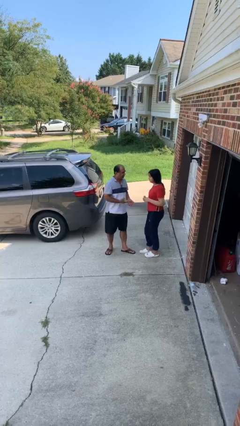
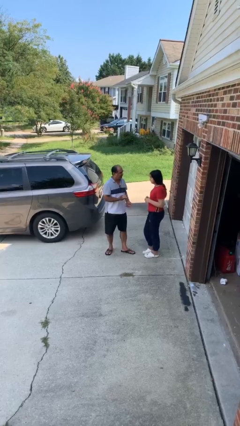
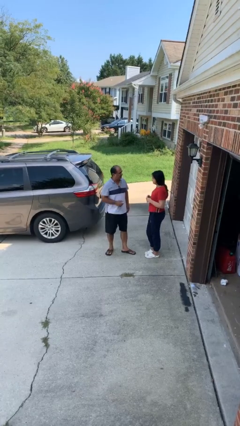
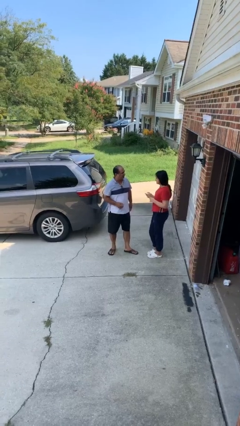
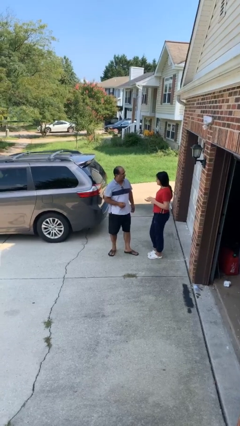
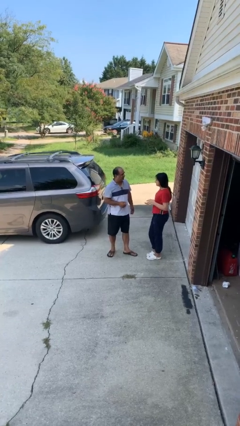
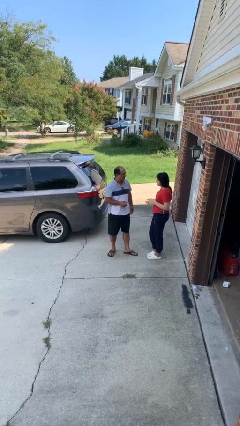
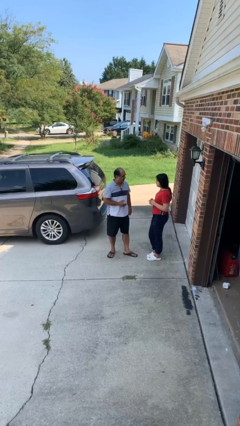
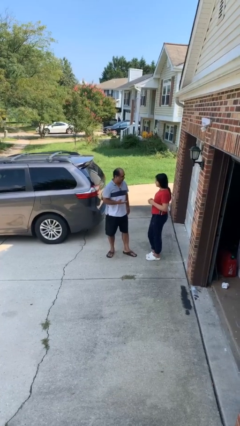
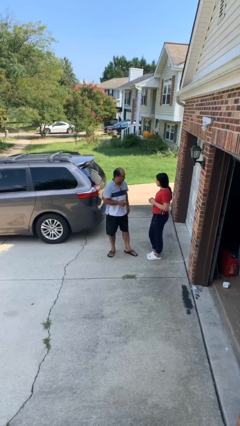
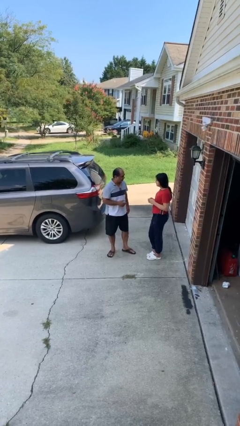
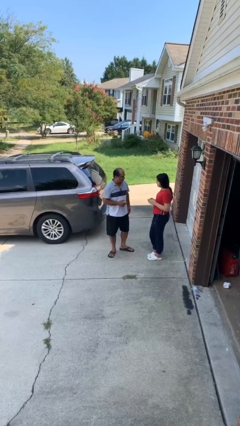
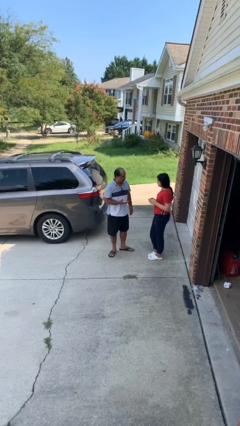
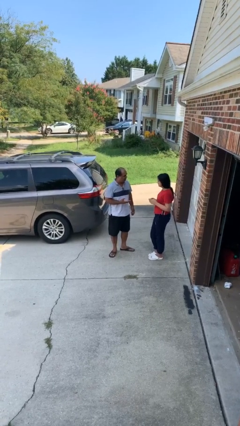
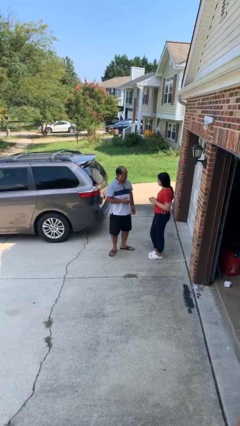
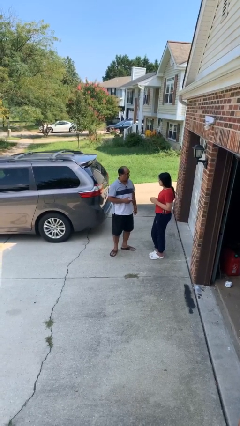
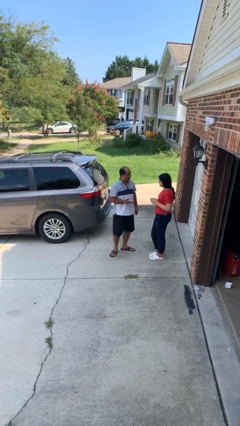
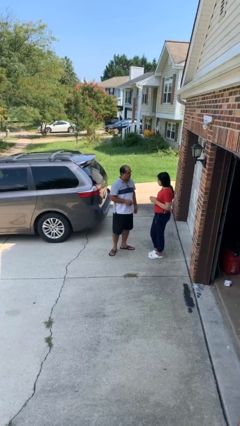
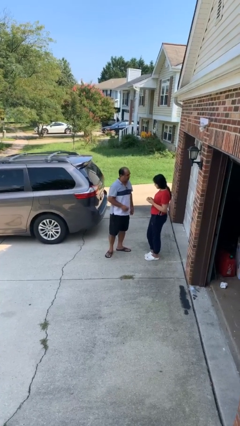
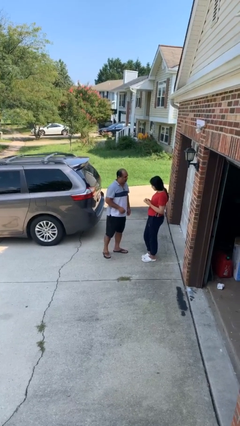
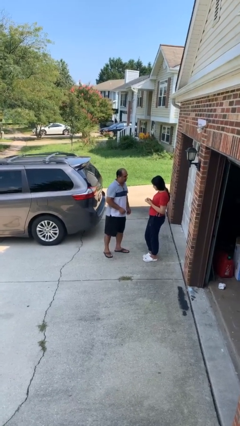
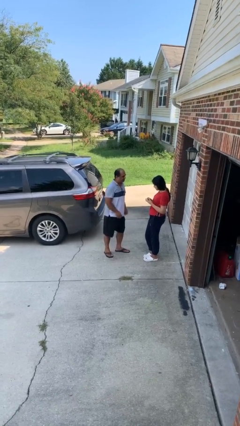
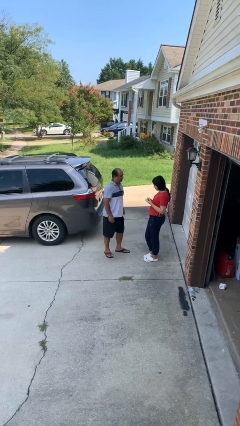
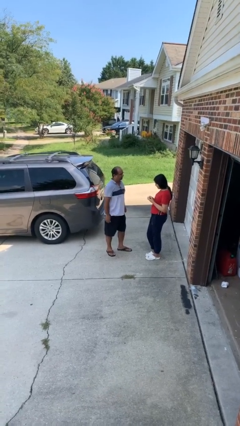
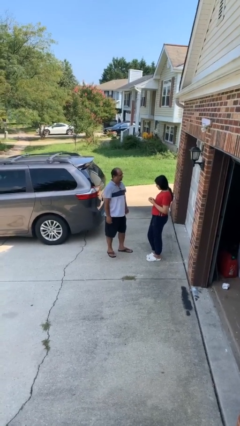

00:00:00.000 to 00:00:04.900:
person talks to person

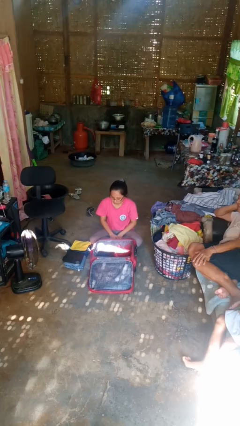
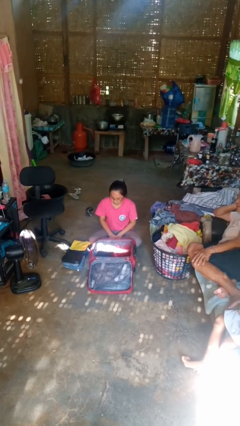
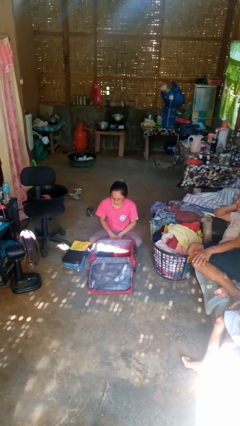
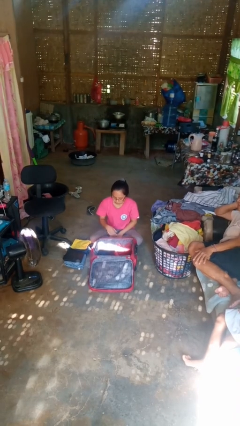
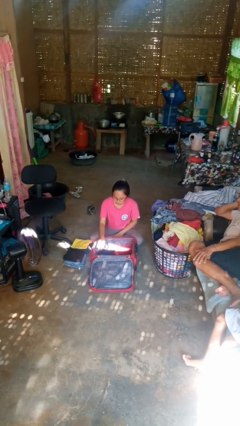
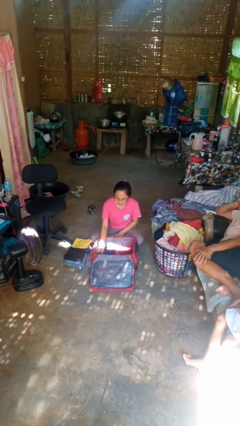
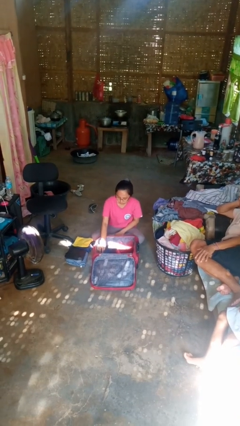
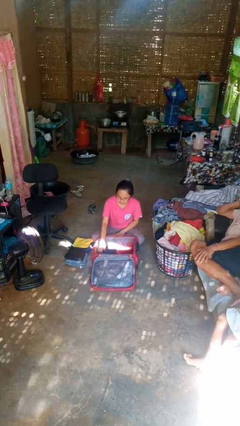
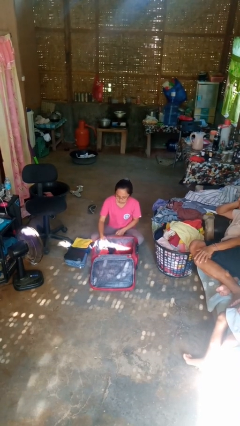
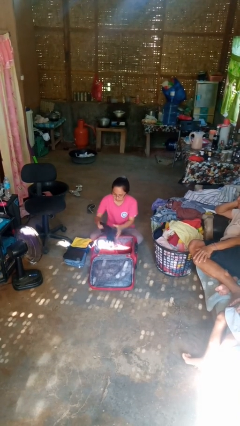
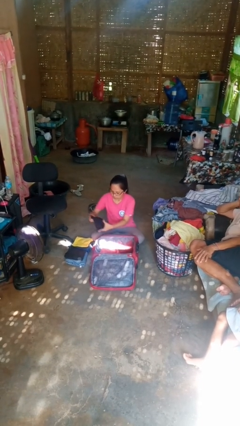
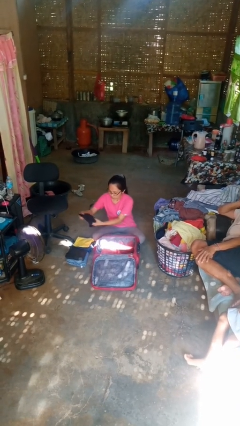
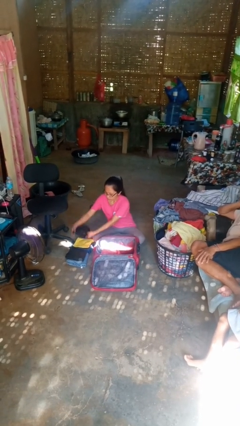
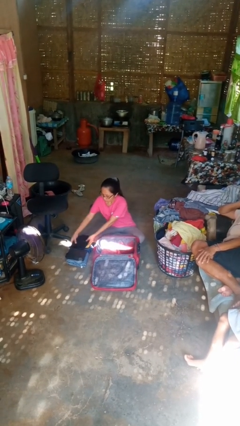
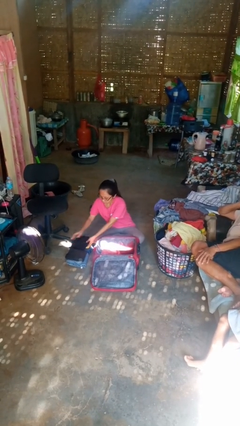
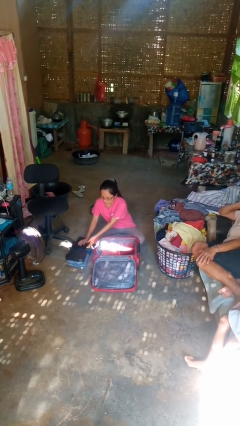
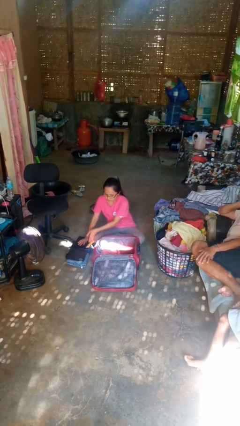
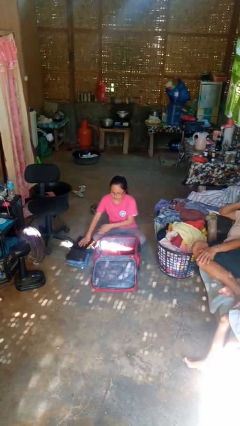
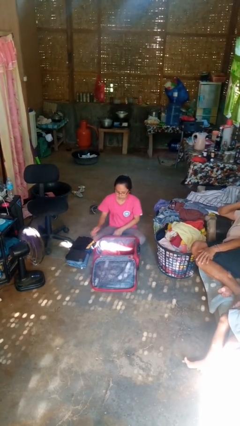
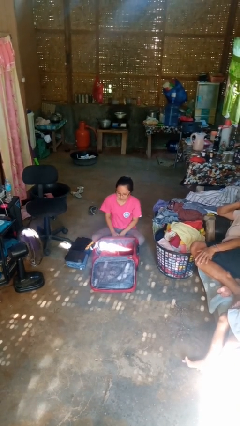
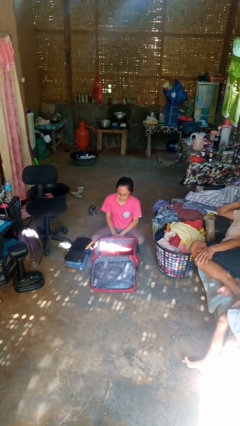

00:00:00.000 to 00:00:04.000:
person unloads clothes from suitcase

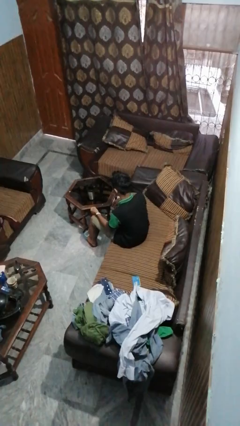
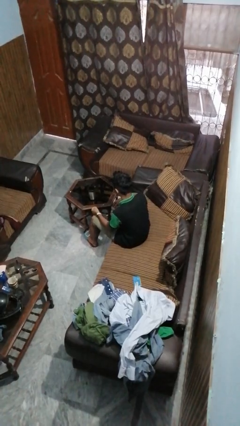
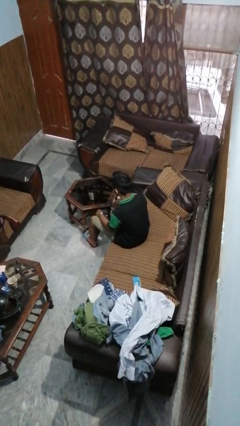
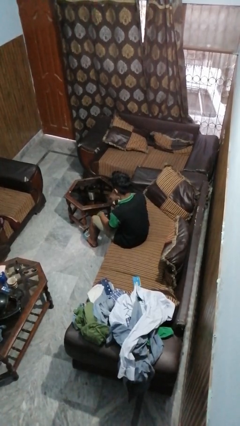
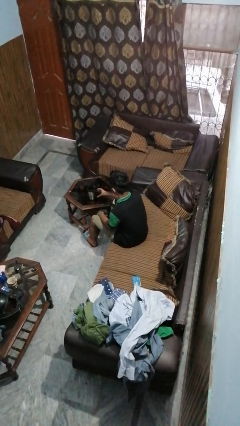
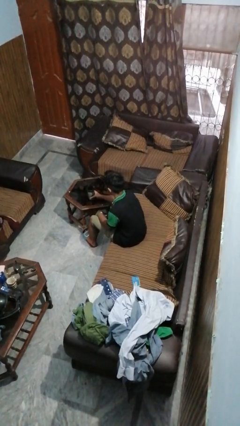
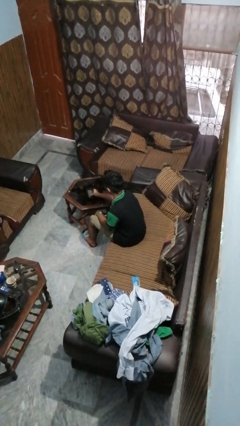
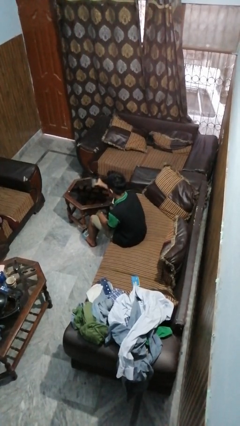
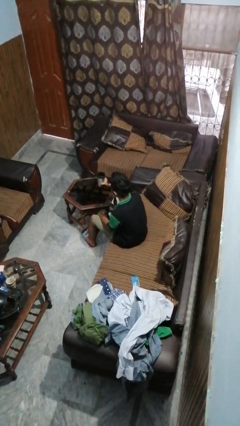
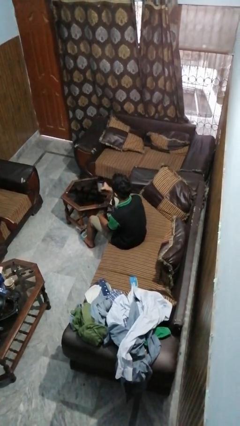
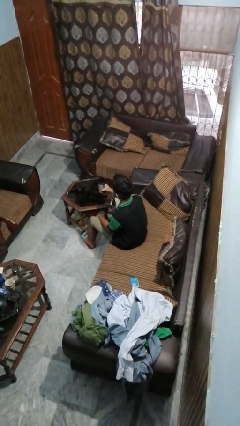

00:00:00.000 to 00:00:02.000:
person picks up object from table

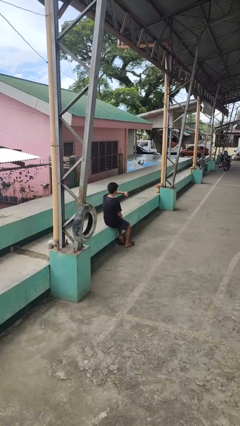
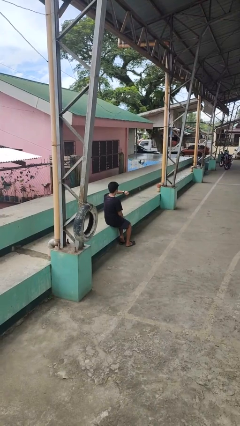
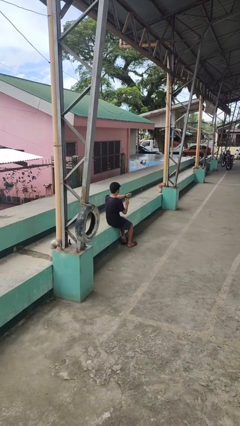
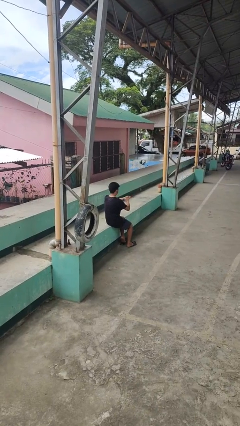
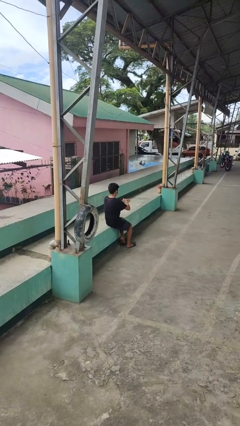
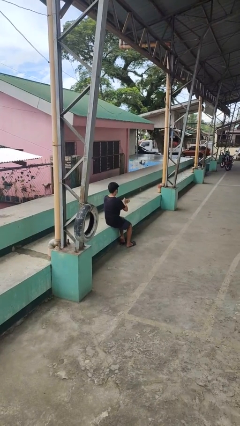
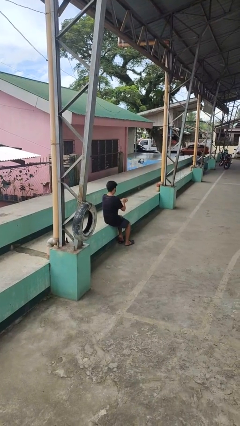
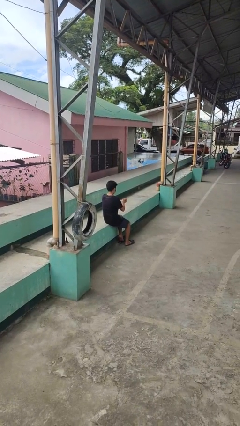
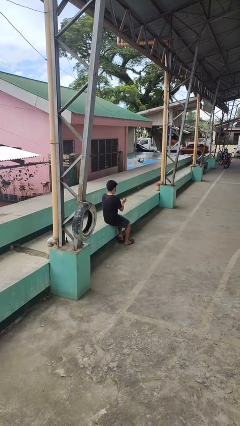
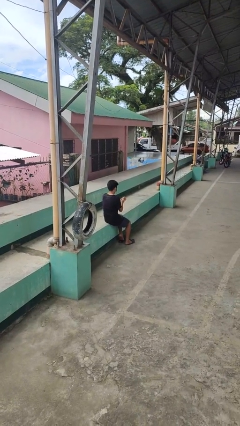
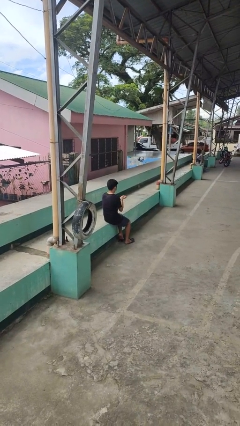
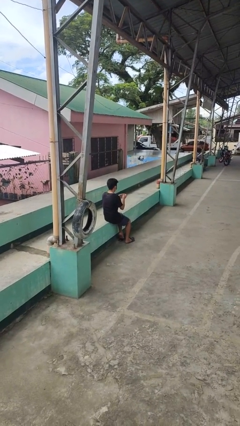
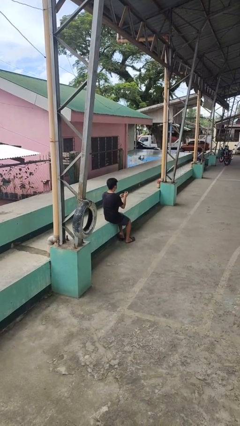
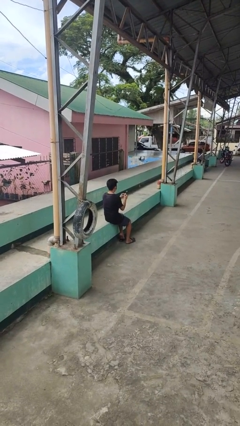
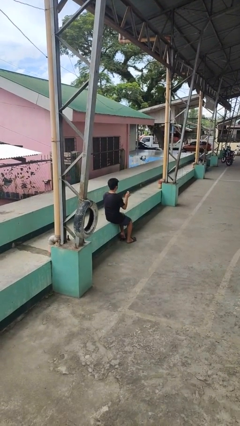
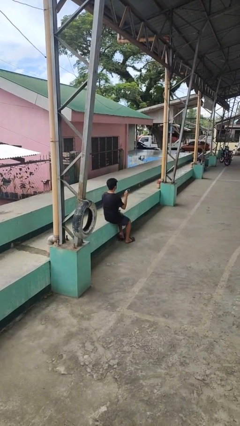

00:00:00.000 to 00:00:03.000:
person takes off wristwatch

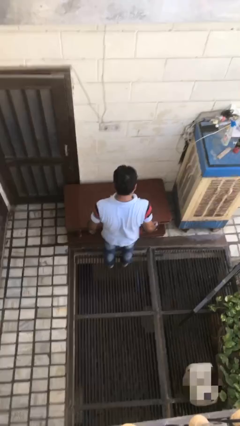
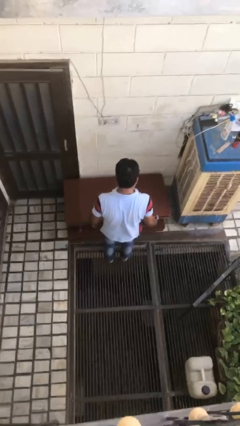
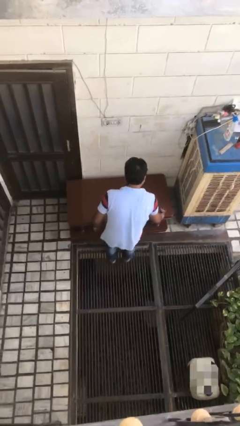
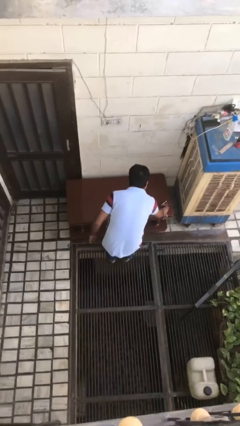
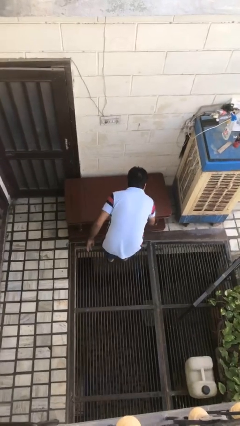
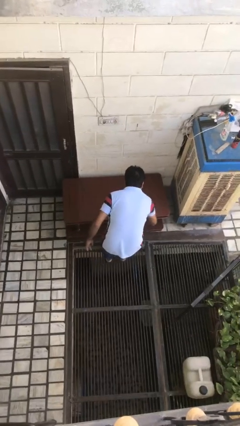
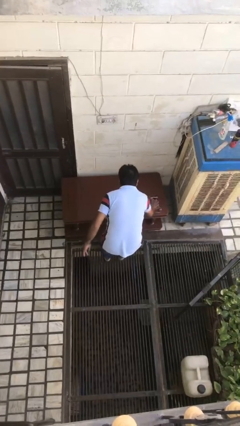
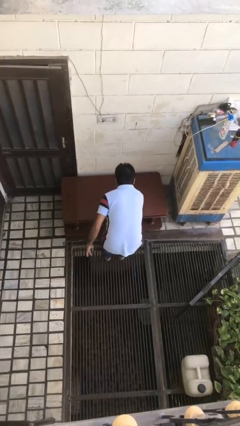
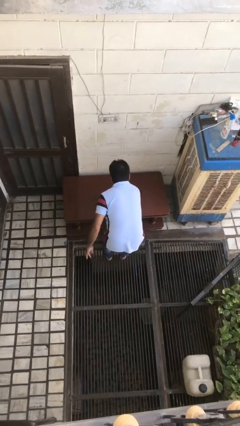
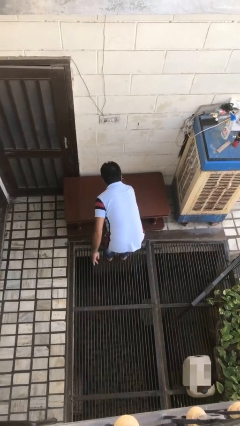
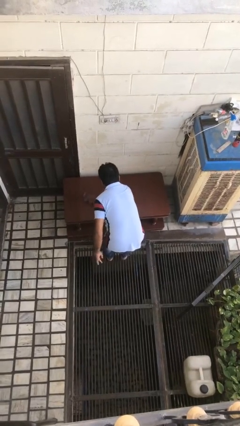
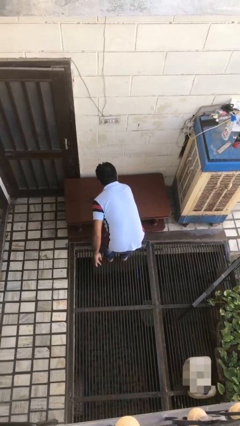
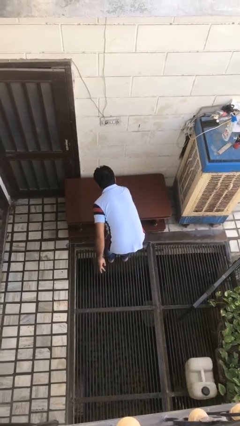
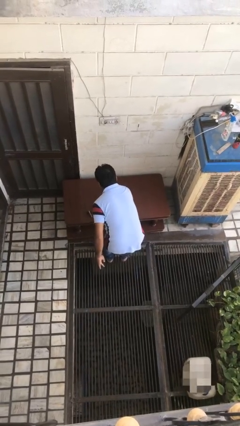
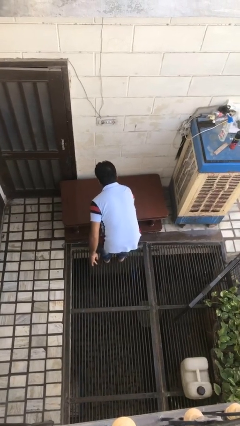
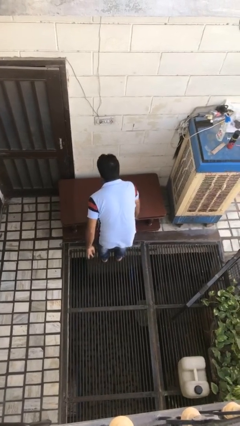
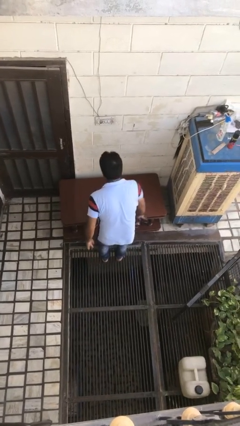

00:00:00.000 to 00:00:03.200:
person cleans table with rag

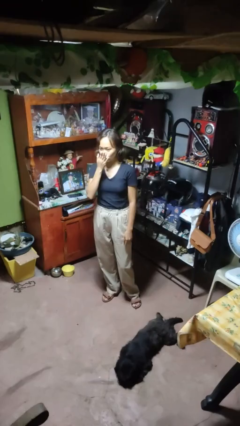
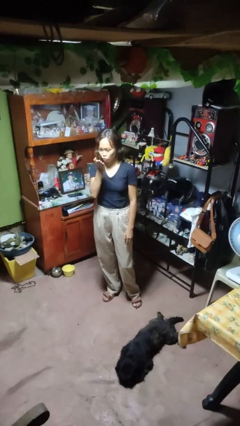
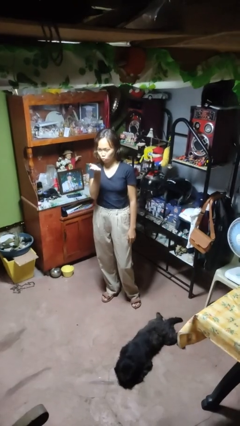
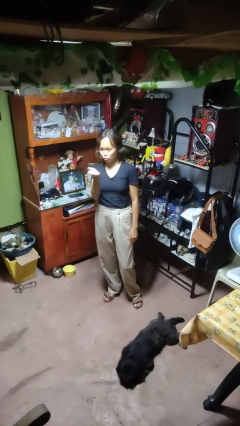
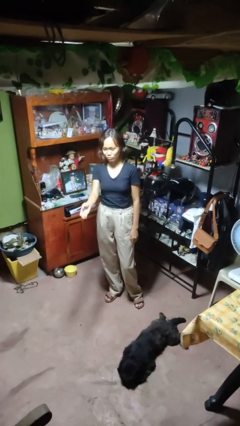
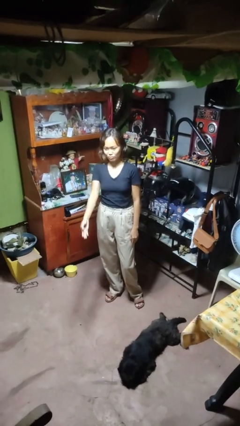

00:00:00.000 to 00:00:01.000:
person gestures blow kiss
